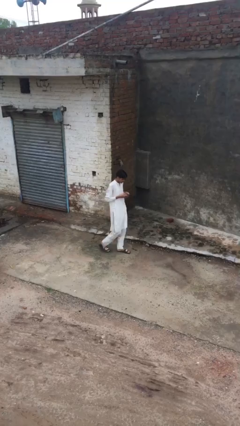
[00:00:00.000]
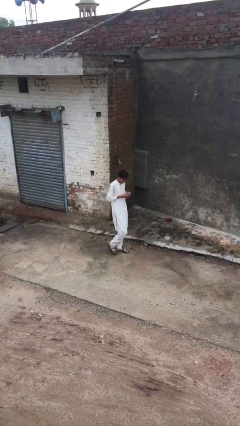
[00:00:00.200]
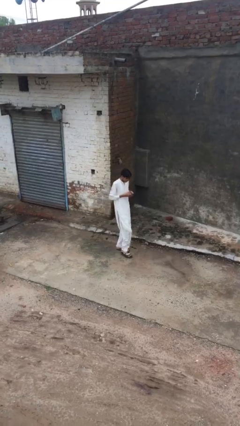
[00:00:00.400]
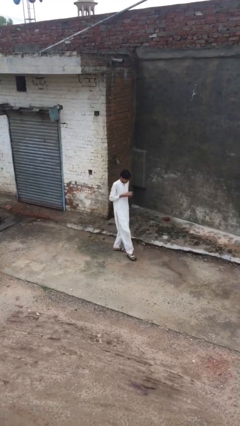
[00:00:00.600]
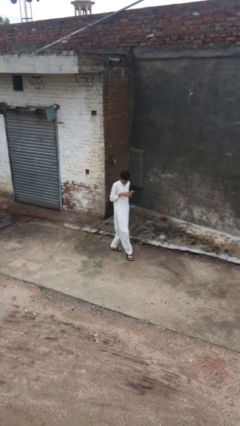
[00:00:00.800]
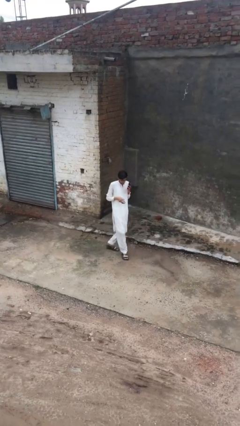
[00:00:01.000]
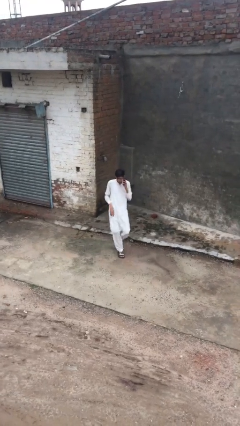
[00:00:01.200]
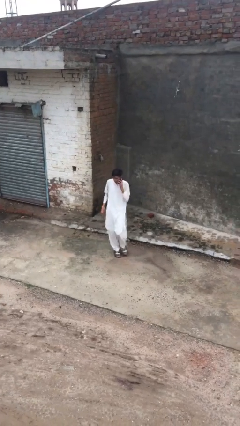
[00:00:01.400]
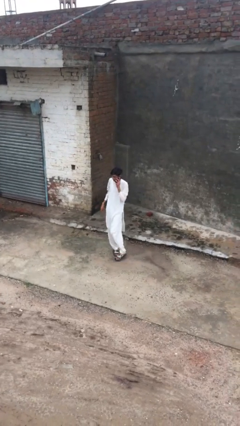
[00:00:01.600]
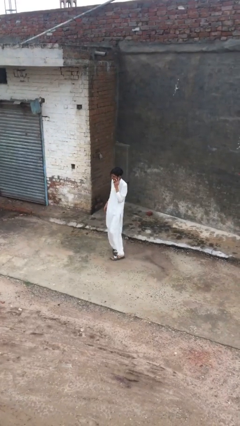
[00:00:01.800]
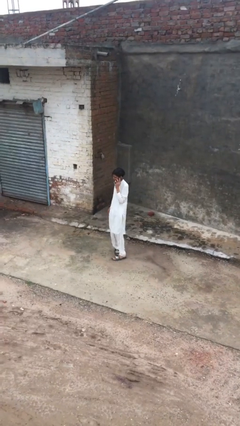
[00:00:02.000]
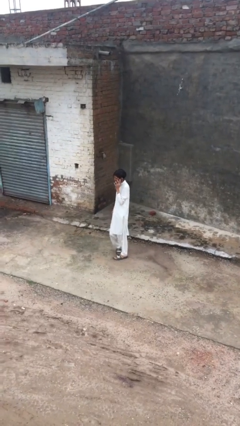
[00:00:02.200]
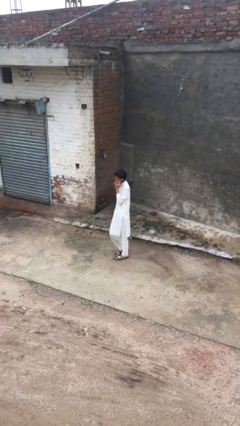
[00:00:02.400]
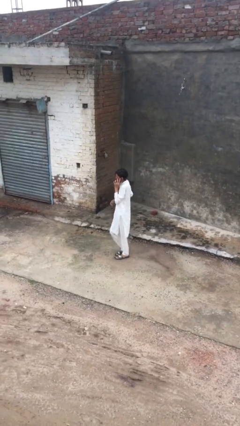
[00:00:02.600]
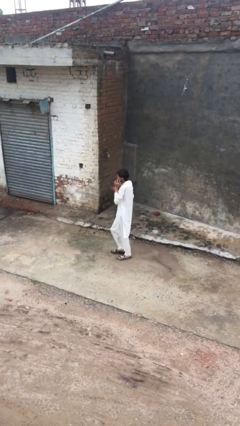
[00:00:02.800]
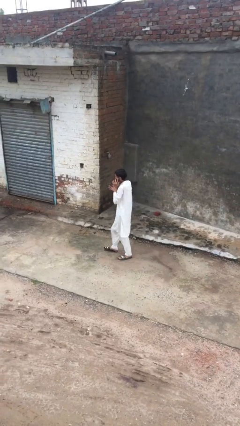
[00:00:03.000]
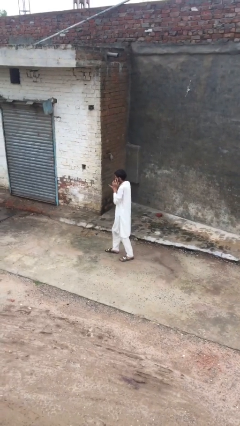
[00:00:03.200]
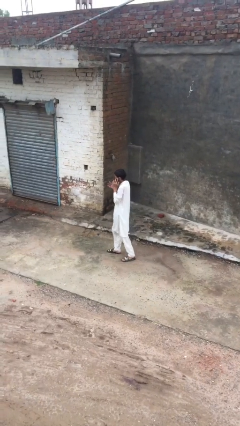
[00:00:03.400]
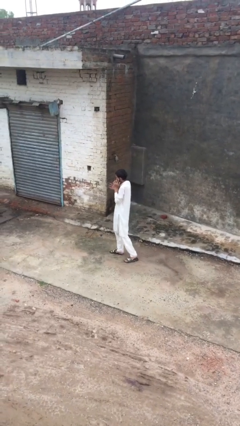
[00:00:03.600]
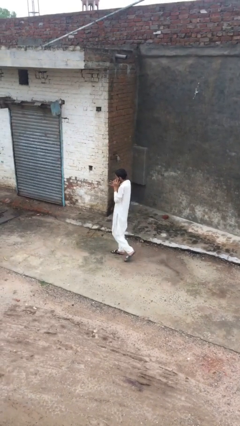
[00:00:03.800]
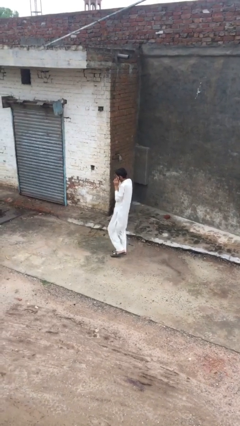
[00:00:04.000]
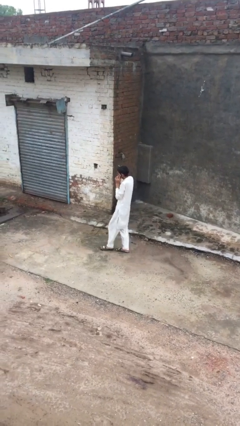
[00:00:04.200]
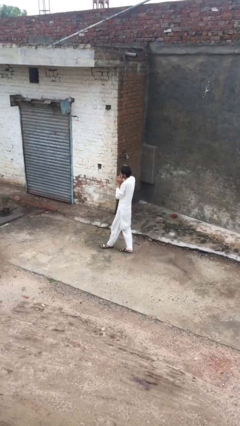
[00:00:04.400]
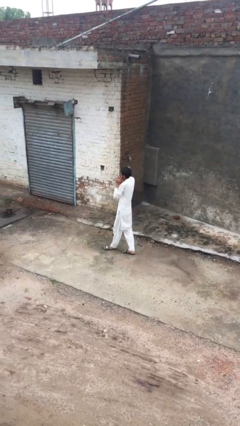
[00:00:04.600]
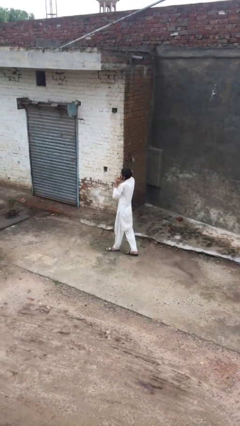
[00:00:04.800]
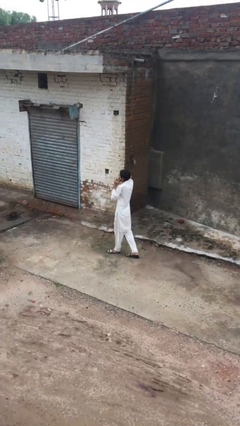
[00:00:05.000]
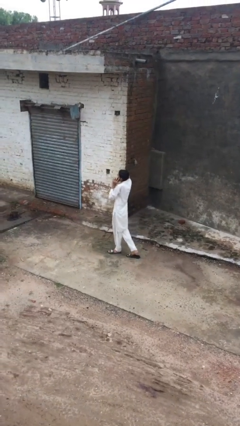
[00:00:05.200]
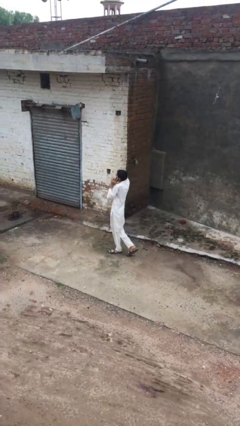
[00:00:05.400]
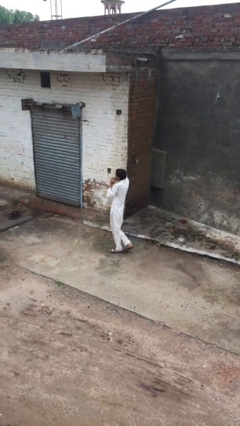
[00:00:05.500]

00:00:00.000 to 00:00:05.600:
person talks on phone

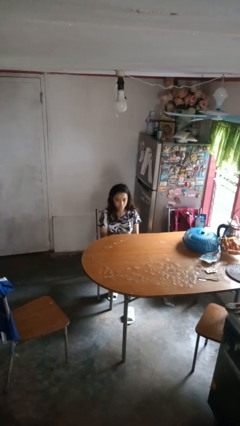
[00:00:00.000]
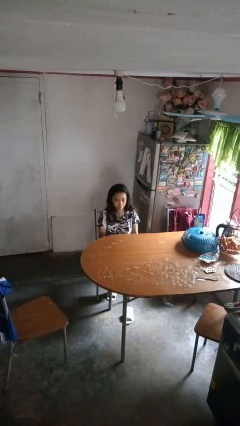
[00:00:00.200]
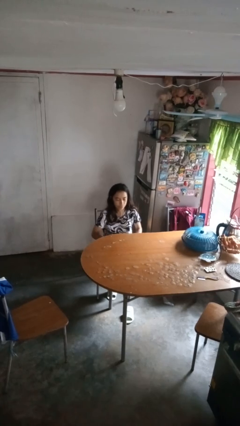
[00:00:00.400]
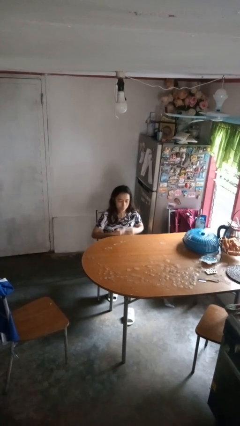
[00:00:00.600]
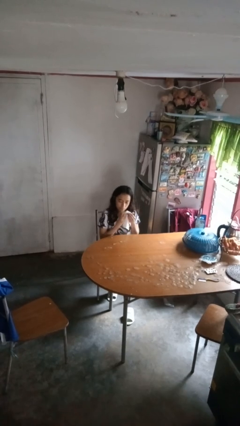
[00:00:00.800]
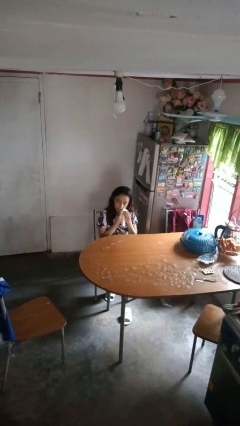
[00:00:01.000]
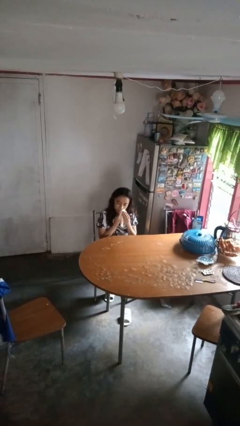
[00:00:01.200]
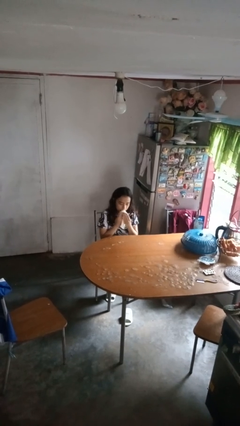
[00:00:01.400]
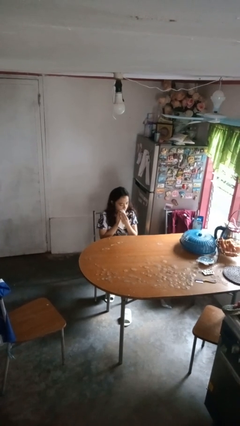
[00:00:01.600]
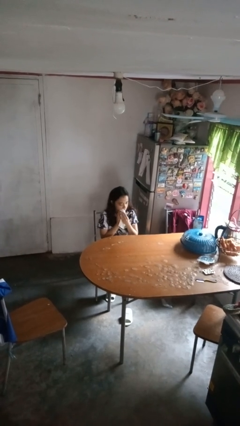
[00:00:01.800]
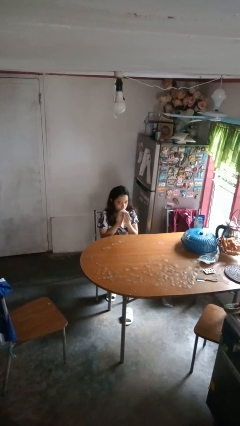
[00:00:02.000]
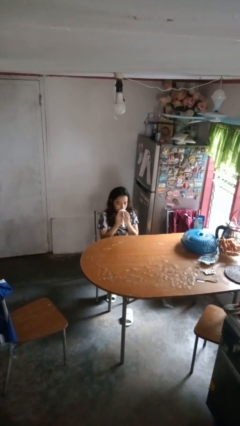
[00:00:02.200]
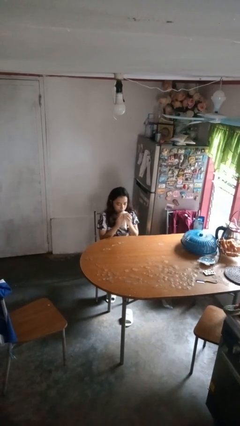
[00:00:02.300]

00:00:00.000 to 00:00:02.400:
person wipes mouth with napkin

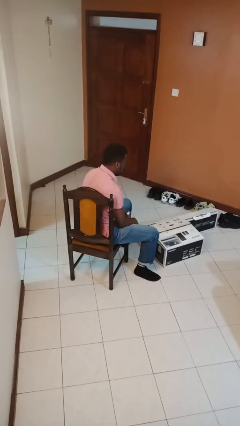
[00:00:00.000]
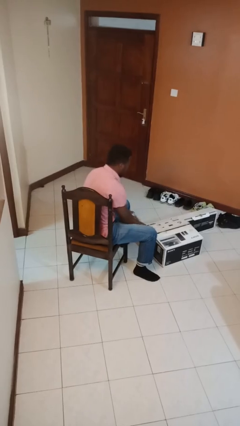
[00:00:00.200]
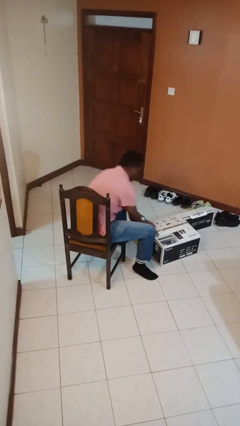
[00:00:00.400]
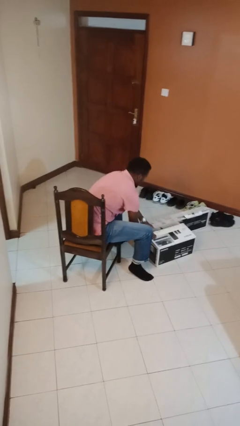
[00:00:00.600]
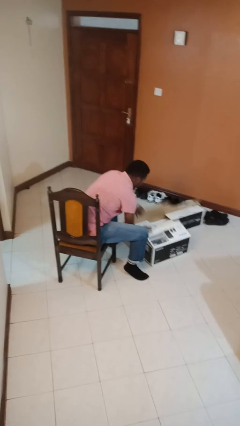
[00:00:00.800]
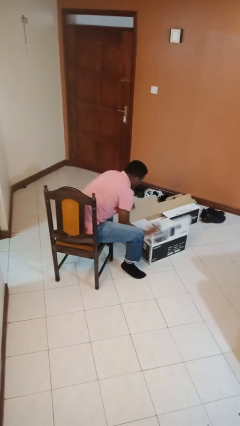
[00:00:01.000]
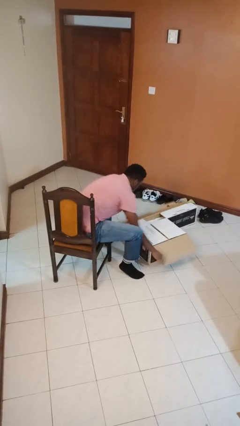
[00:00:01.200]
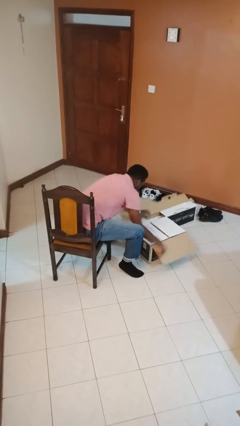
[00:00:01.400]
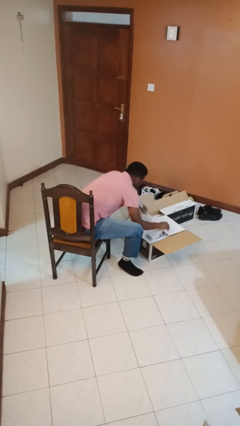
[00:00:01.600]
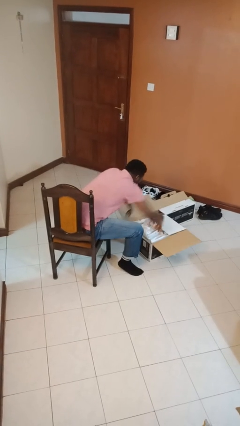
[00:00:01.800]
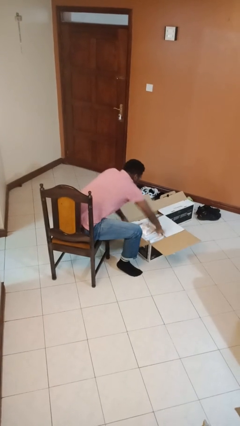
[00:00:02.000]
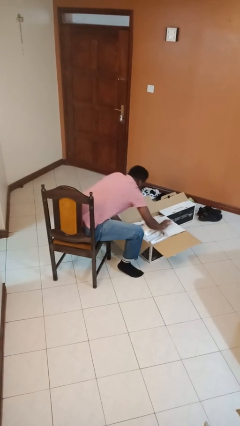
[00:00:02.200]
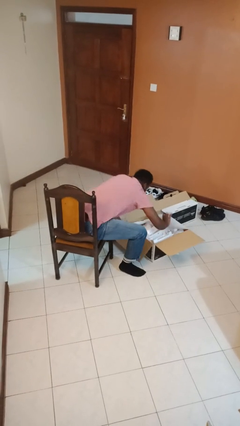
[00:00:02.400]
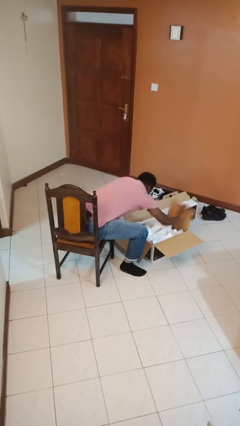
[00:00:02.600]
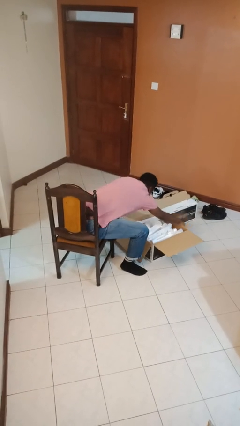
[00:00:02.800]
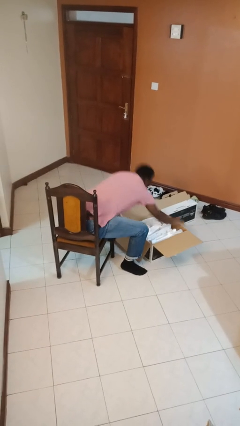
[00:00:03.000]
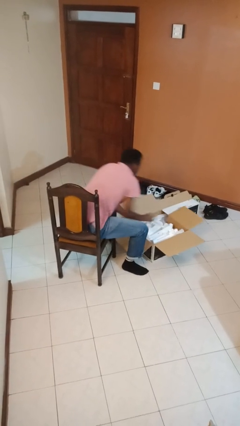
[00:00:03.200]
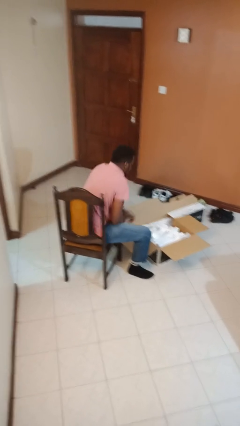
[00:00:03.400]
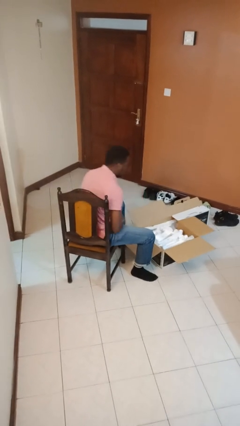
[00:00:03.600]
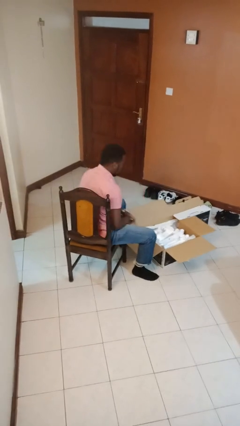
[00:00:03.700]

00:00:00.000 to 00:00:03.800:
person opens box

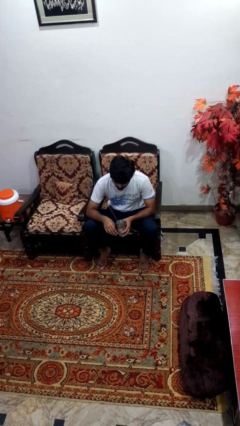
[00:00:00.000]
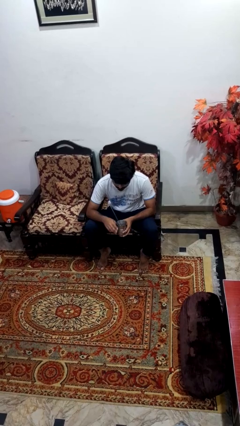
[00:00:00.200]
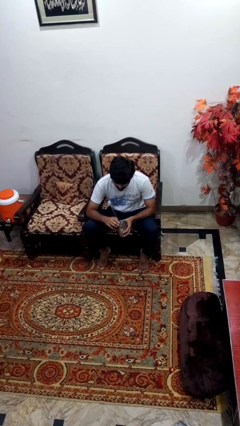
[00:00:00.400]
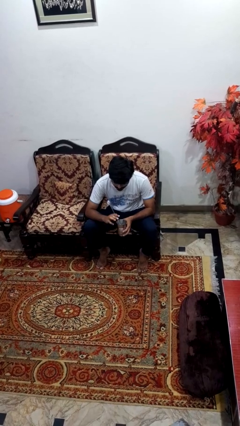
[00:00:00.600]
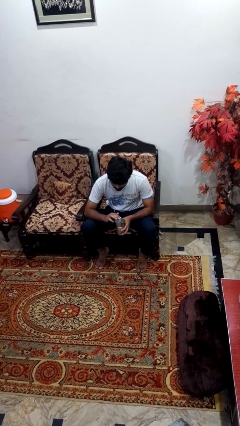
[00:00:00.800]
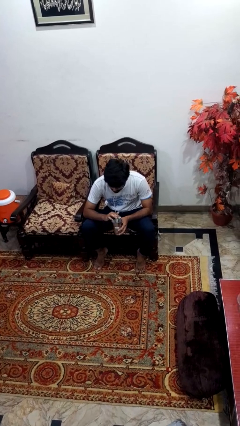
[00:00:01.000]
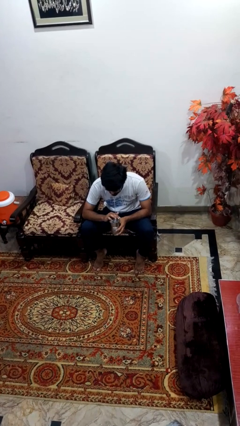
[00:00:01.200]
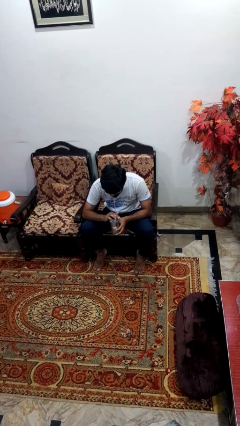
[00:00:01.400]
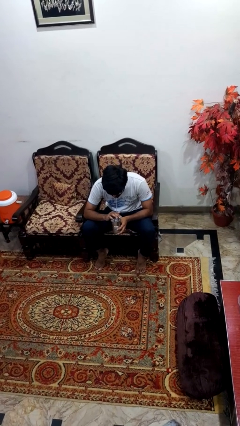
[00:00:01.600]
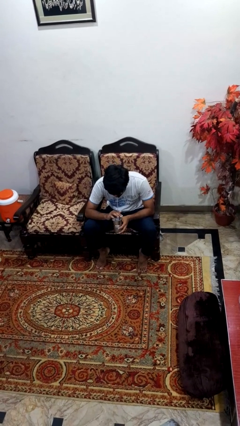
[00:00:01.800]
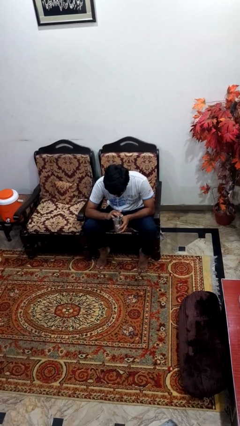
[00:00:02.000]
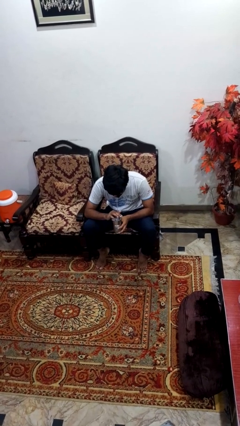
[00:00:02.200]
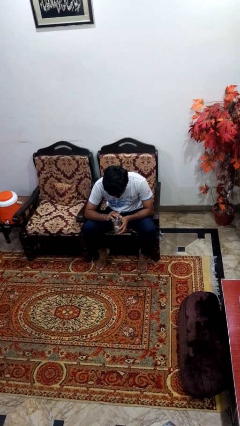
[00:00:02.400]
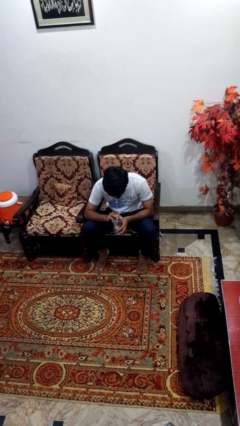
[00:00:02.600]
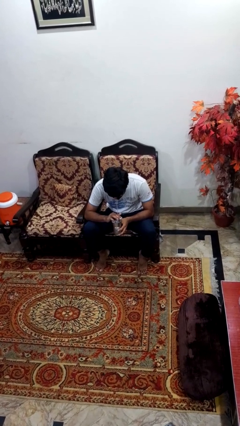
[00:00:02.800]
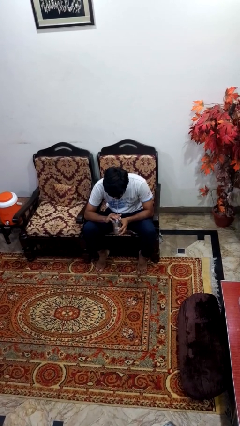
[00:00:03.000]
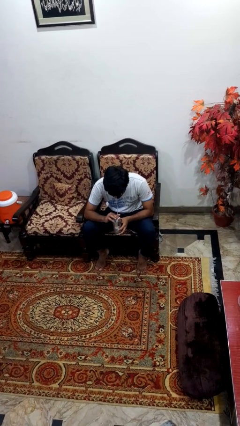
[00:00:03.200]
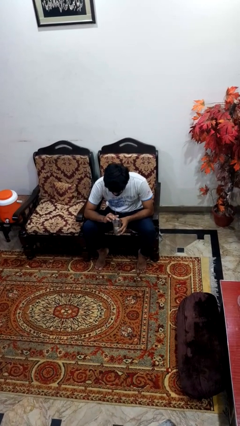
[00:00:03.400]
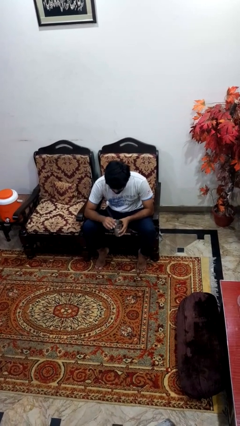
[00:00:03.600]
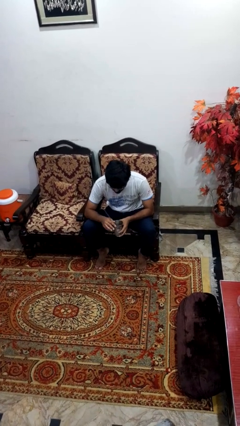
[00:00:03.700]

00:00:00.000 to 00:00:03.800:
person drinks from straw

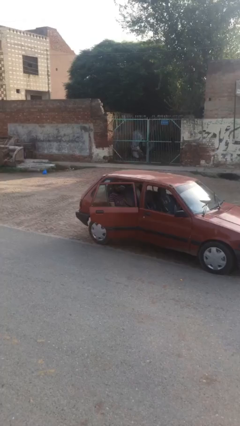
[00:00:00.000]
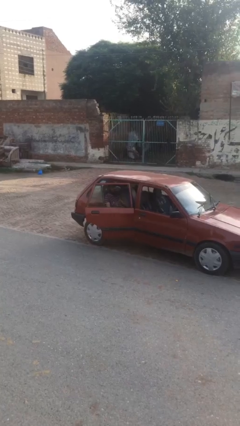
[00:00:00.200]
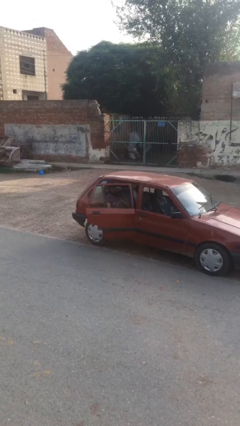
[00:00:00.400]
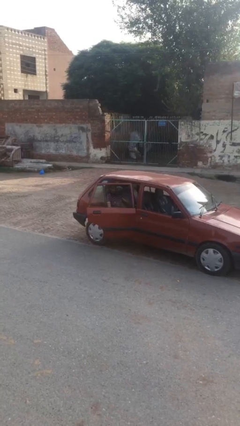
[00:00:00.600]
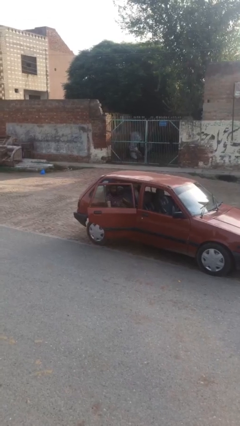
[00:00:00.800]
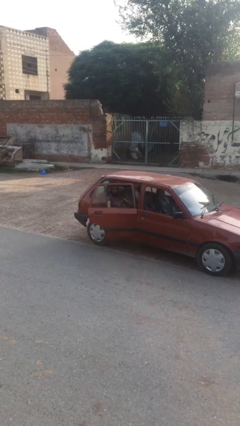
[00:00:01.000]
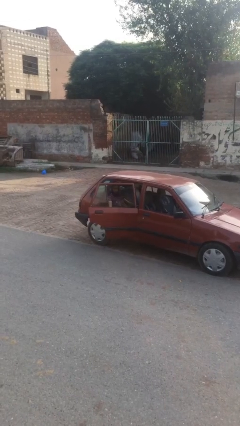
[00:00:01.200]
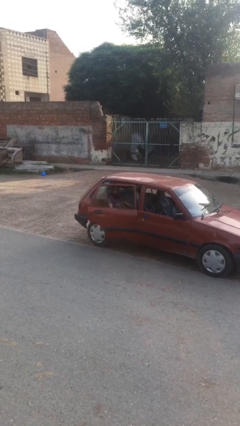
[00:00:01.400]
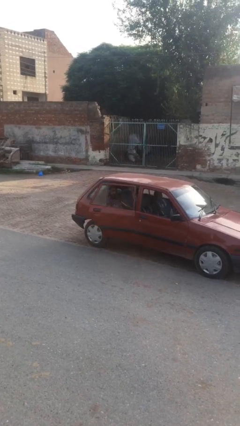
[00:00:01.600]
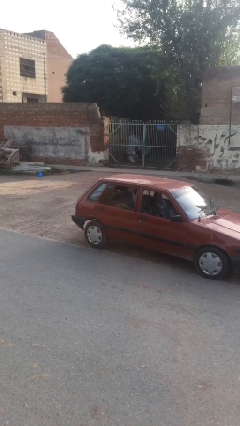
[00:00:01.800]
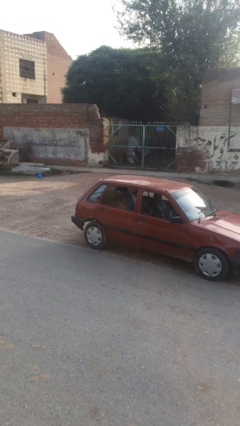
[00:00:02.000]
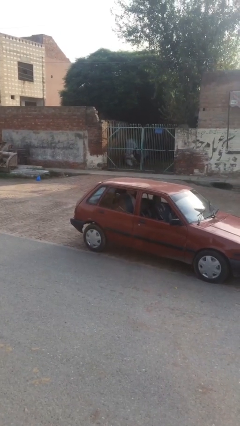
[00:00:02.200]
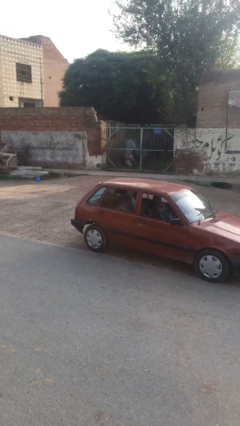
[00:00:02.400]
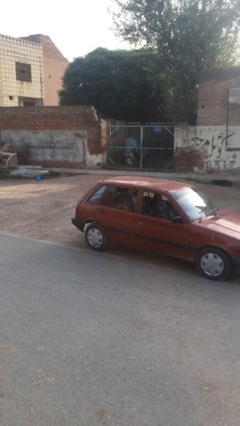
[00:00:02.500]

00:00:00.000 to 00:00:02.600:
person closes car door
